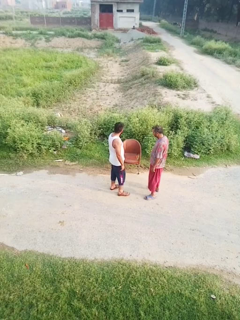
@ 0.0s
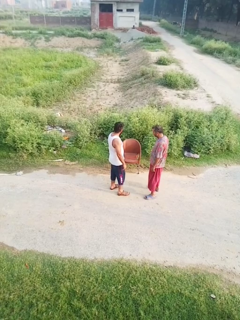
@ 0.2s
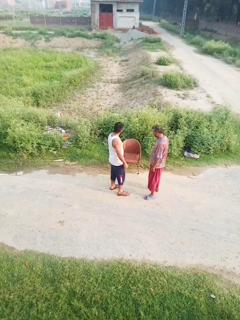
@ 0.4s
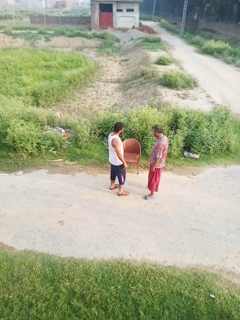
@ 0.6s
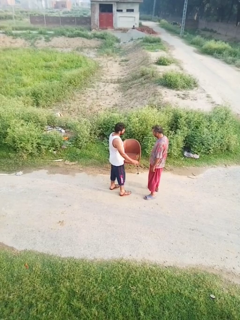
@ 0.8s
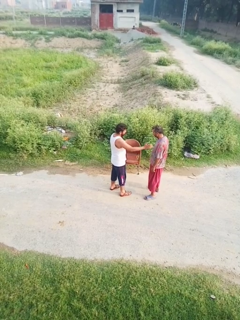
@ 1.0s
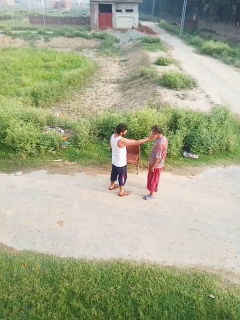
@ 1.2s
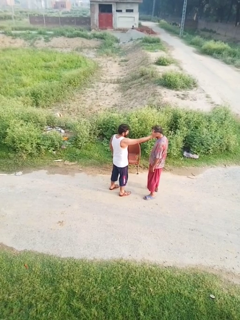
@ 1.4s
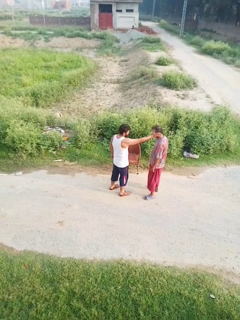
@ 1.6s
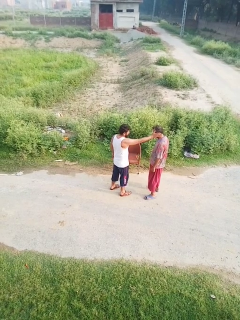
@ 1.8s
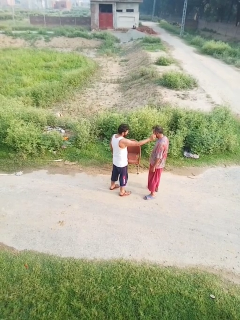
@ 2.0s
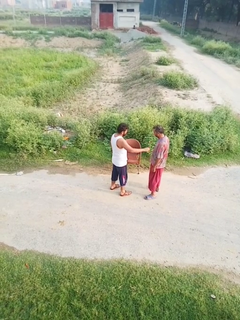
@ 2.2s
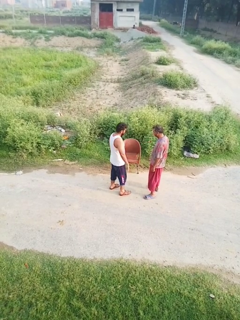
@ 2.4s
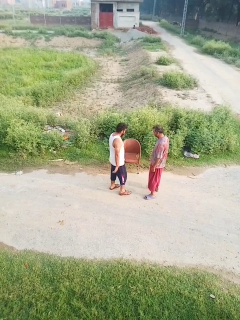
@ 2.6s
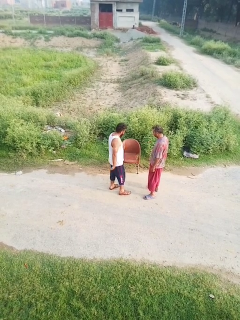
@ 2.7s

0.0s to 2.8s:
person touches face of person

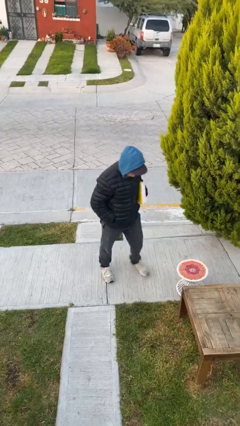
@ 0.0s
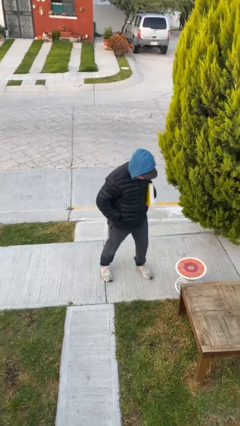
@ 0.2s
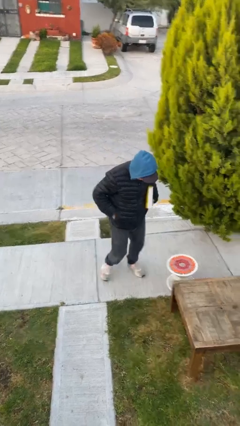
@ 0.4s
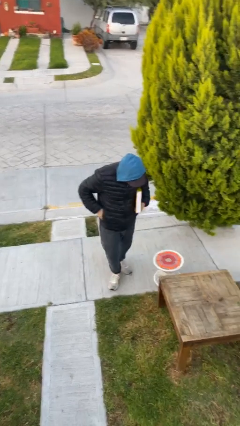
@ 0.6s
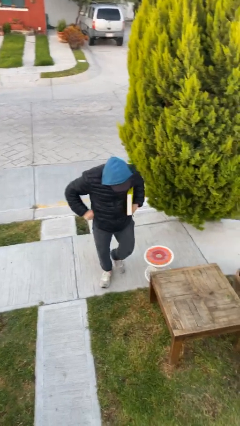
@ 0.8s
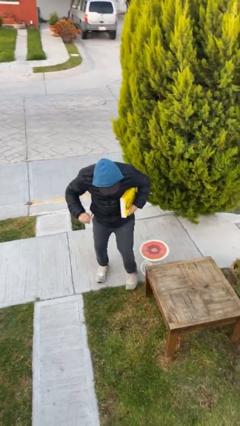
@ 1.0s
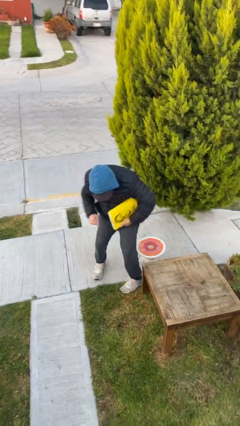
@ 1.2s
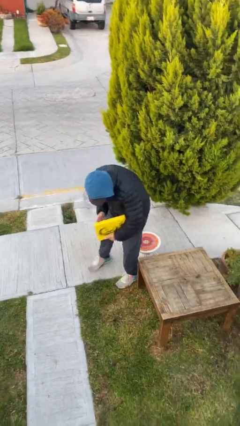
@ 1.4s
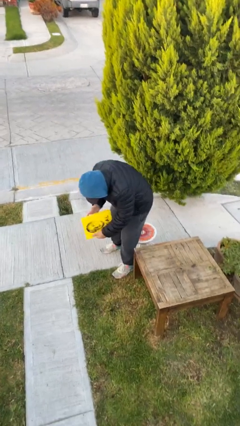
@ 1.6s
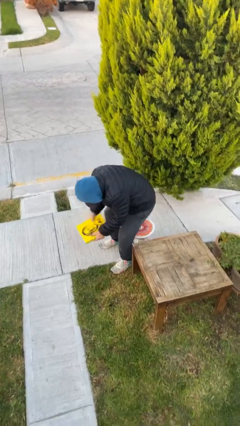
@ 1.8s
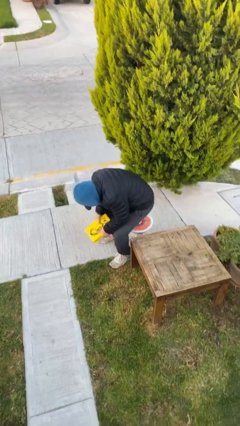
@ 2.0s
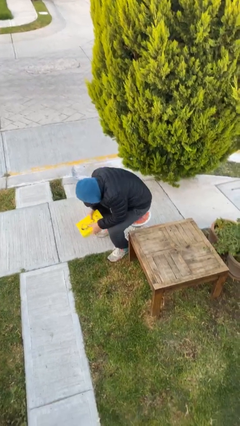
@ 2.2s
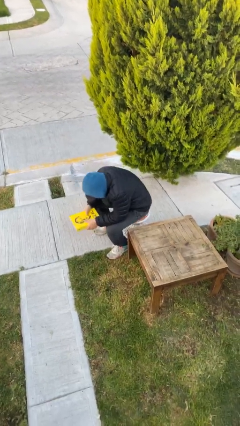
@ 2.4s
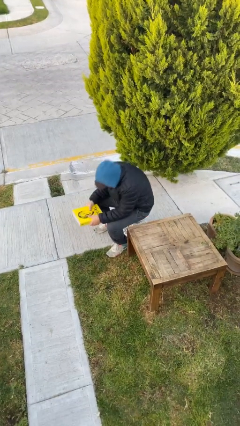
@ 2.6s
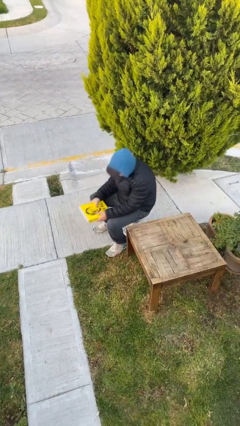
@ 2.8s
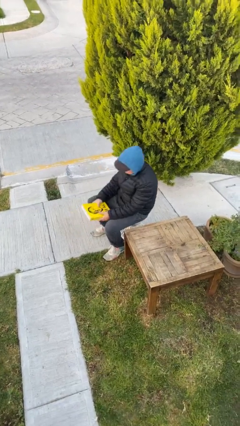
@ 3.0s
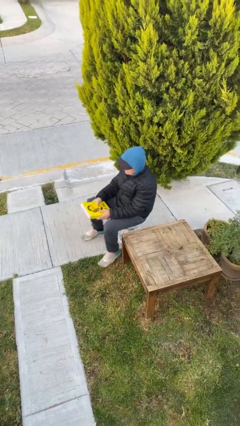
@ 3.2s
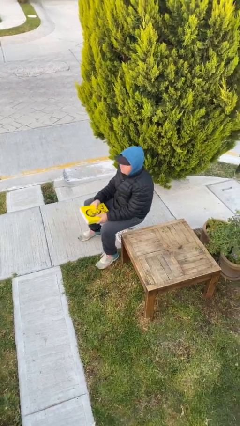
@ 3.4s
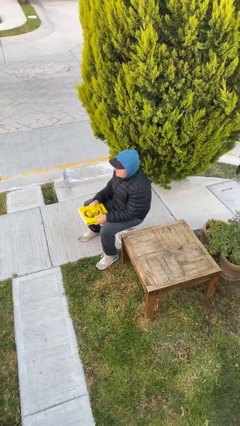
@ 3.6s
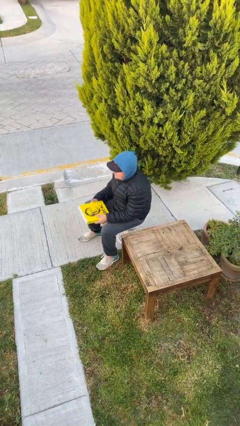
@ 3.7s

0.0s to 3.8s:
person sits down

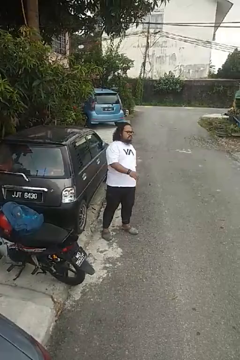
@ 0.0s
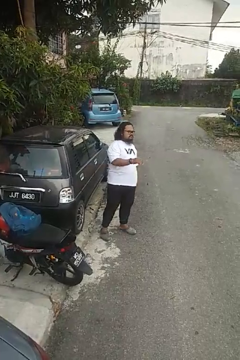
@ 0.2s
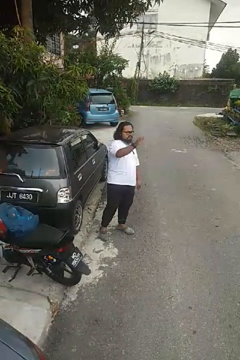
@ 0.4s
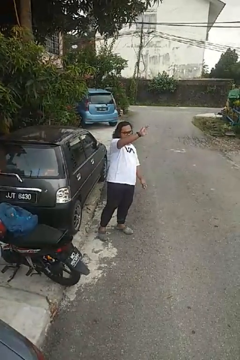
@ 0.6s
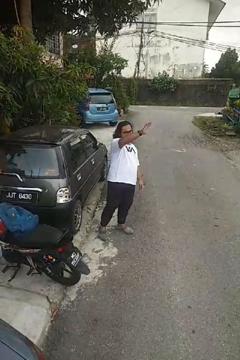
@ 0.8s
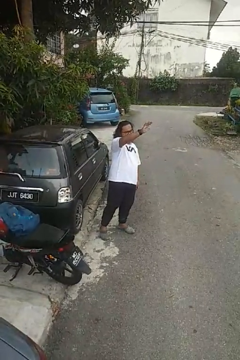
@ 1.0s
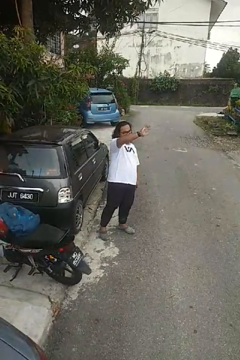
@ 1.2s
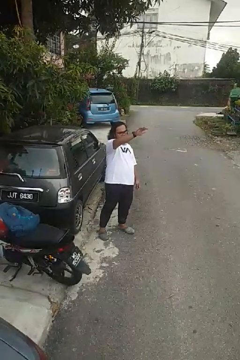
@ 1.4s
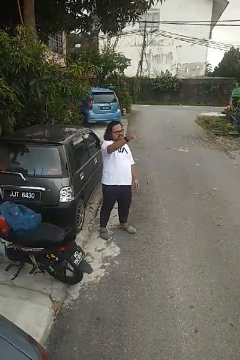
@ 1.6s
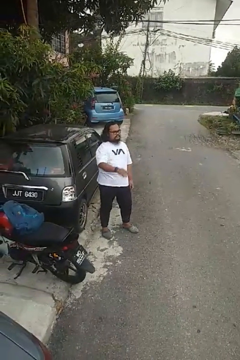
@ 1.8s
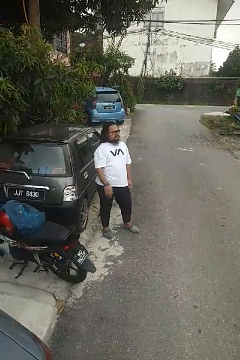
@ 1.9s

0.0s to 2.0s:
person waves at person

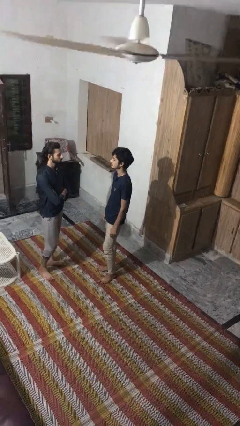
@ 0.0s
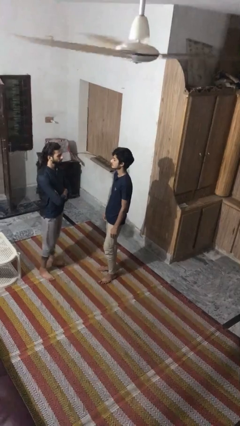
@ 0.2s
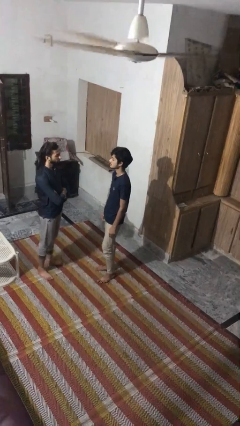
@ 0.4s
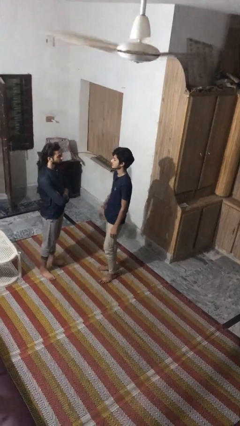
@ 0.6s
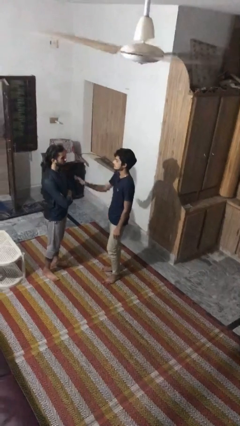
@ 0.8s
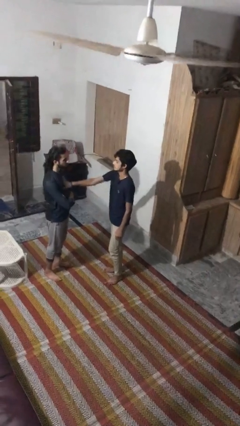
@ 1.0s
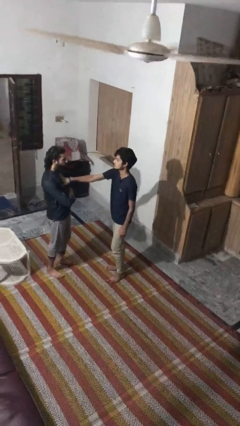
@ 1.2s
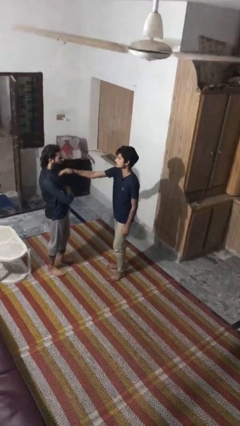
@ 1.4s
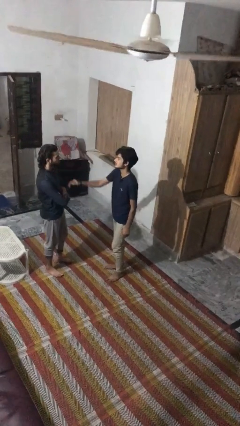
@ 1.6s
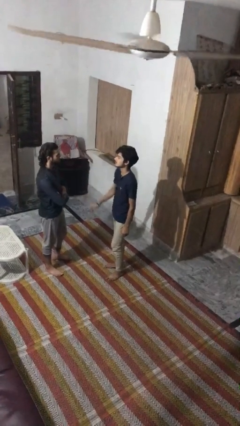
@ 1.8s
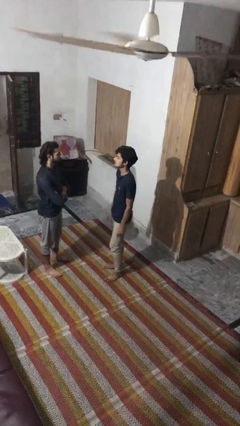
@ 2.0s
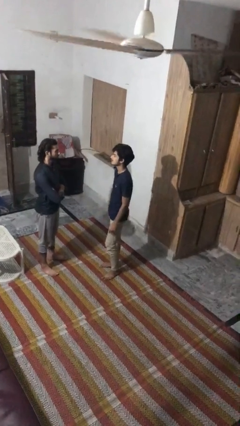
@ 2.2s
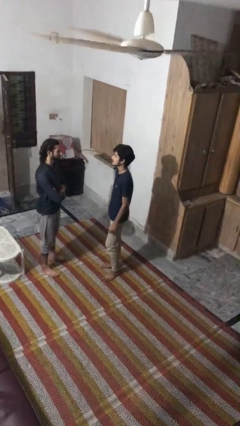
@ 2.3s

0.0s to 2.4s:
person shoves person

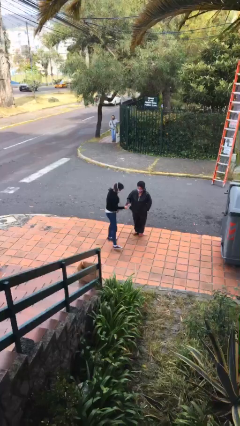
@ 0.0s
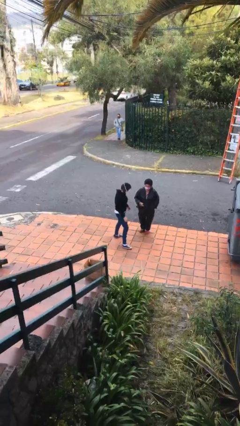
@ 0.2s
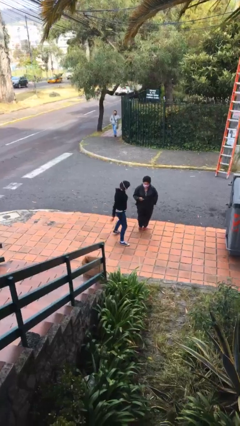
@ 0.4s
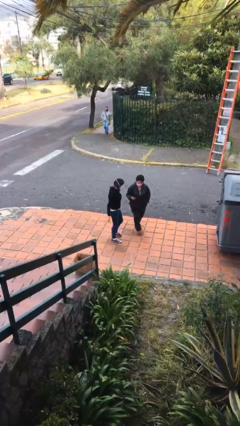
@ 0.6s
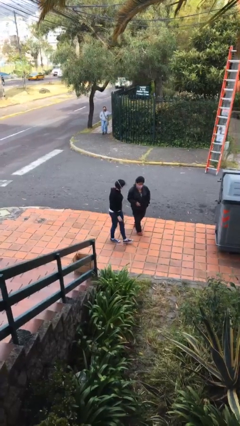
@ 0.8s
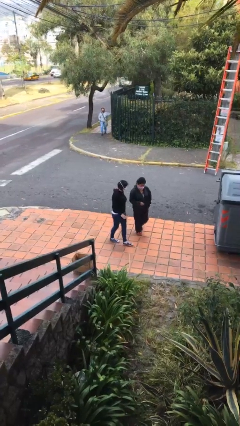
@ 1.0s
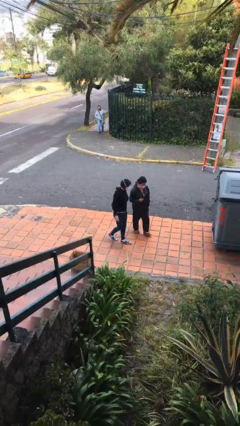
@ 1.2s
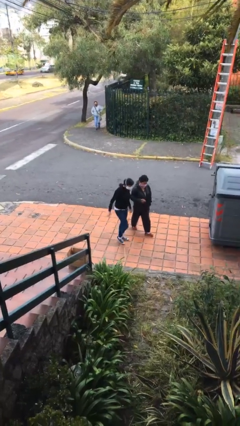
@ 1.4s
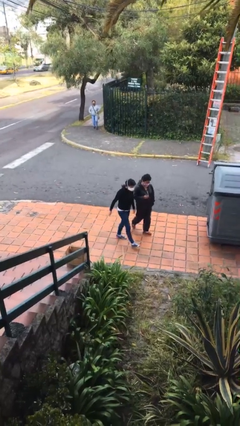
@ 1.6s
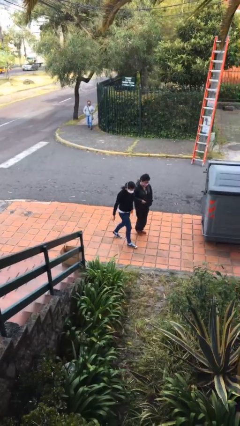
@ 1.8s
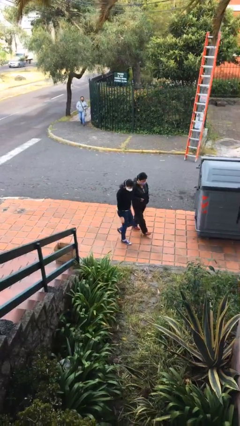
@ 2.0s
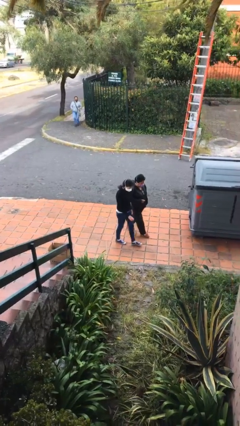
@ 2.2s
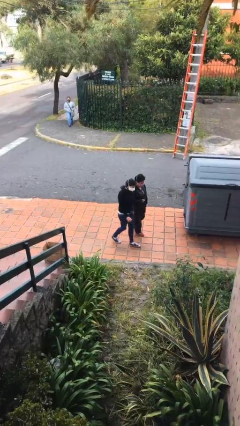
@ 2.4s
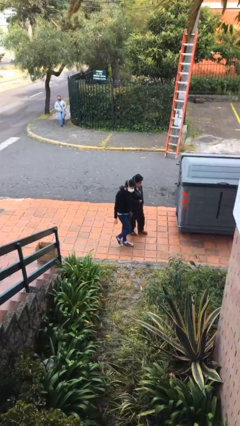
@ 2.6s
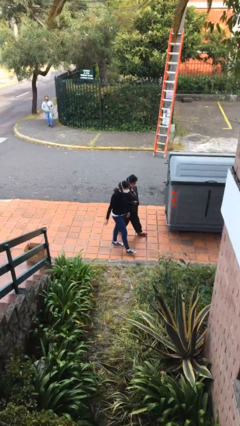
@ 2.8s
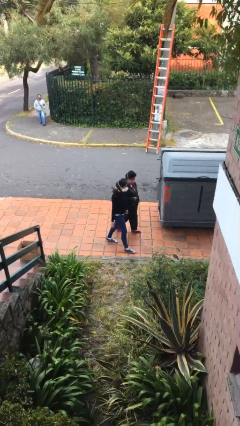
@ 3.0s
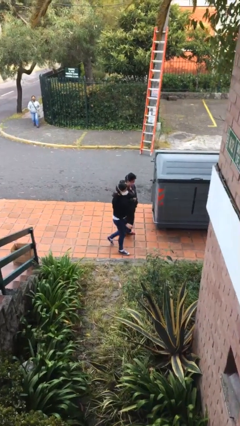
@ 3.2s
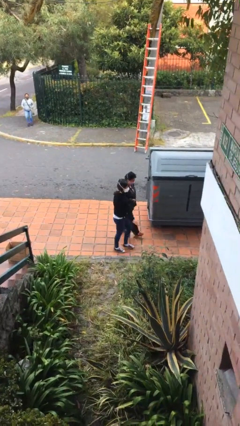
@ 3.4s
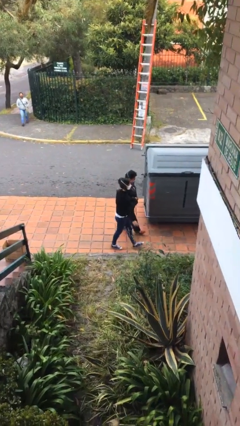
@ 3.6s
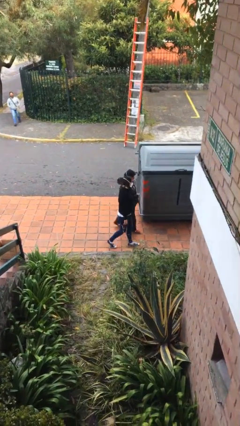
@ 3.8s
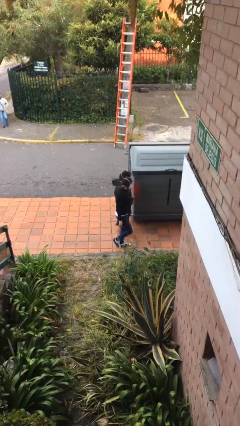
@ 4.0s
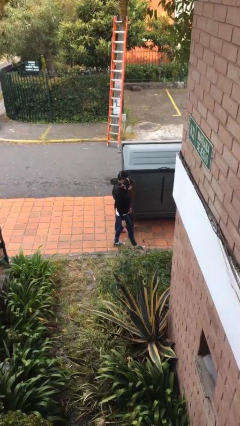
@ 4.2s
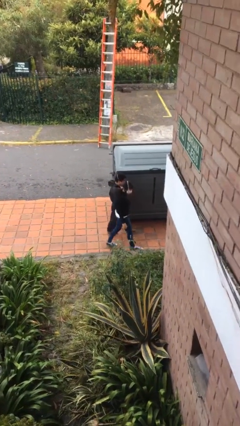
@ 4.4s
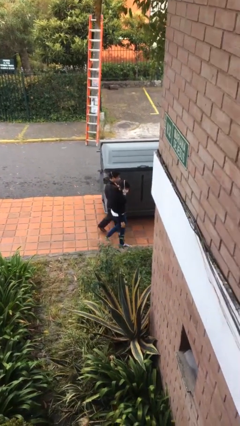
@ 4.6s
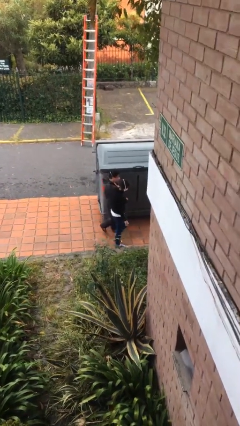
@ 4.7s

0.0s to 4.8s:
person talks to person

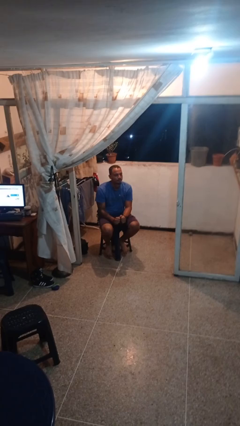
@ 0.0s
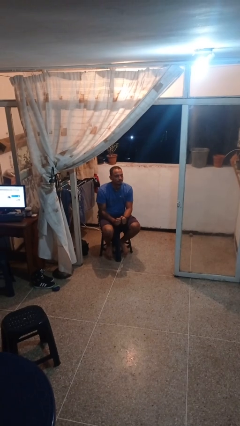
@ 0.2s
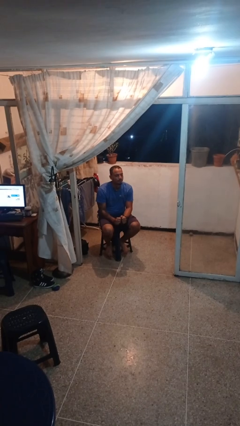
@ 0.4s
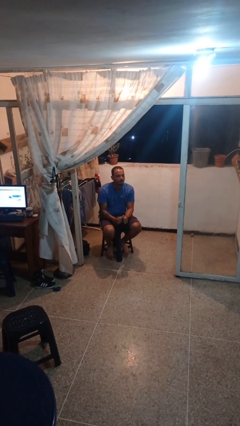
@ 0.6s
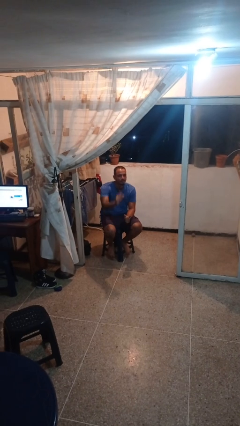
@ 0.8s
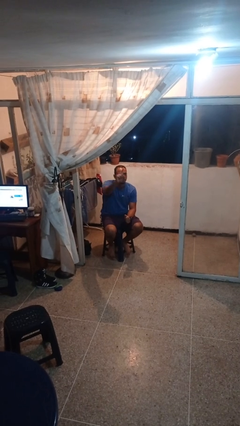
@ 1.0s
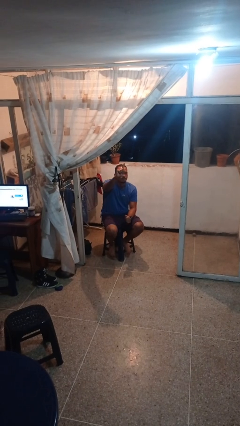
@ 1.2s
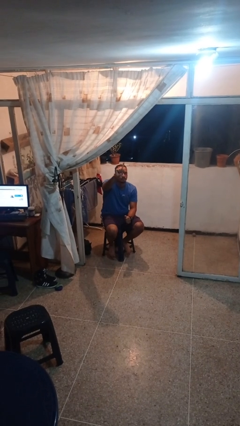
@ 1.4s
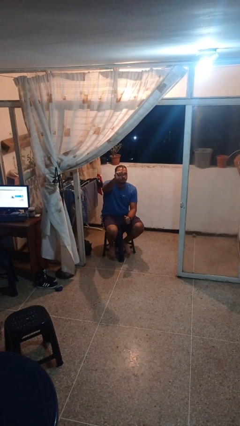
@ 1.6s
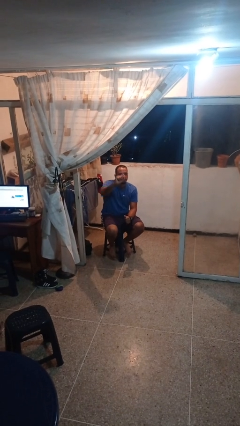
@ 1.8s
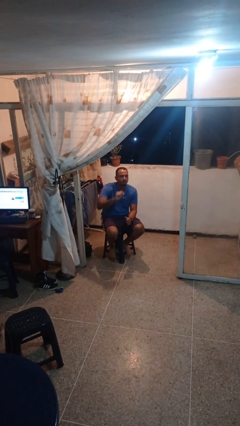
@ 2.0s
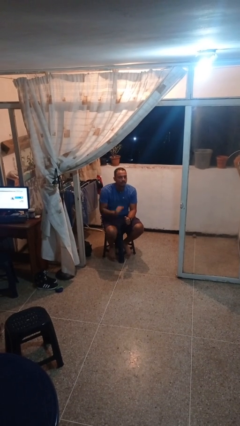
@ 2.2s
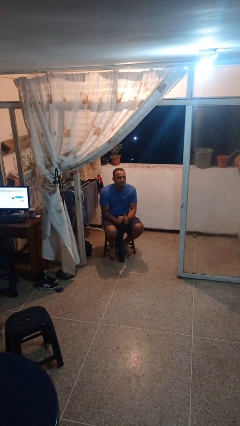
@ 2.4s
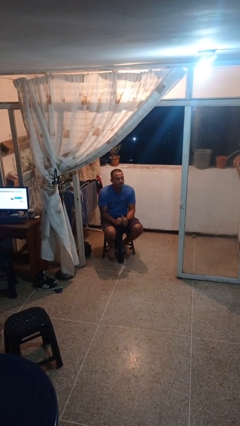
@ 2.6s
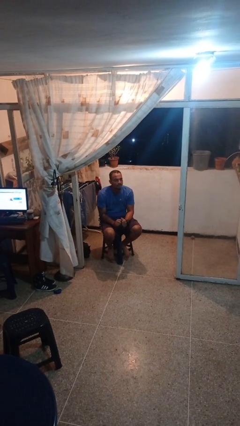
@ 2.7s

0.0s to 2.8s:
person gestures number one
